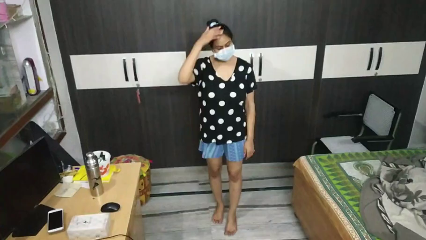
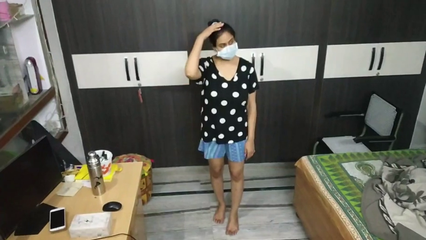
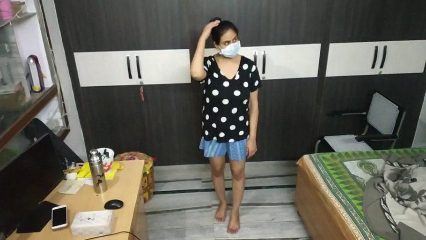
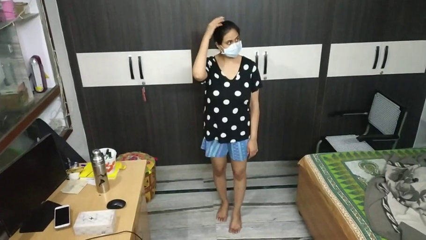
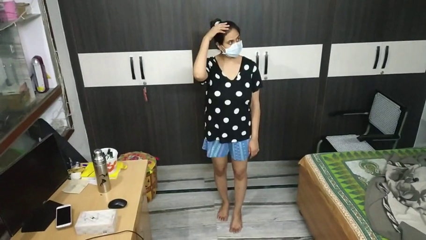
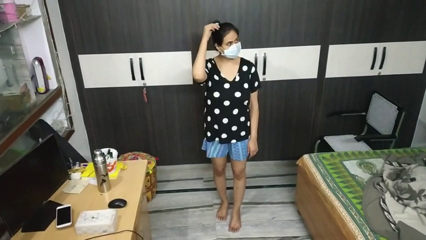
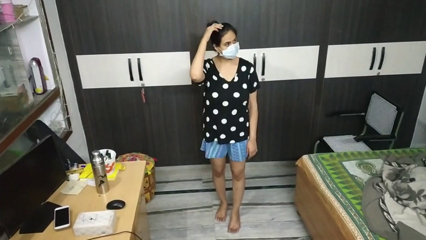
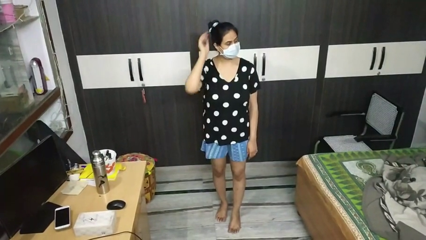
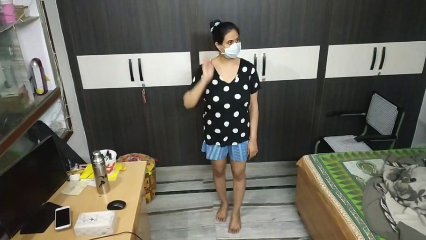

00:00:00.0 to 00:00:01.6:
person pats head

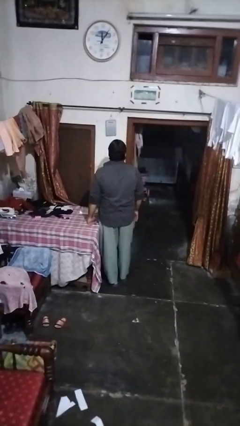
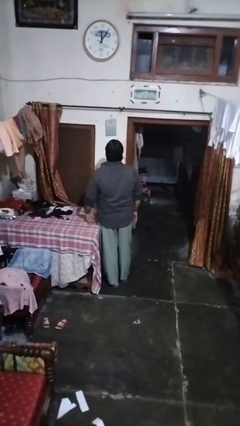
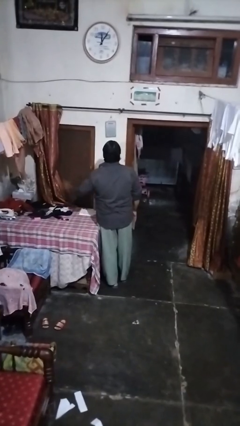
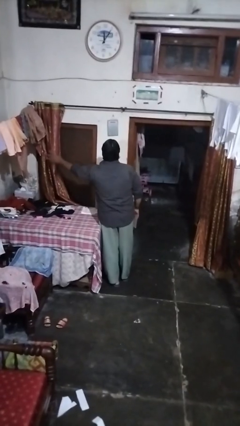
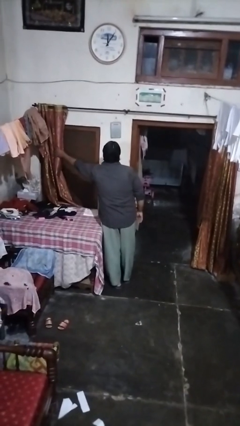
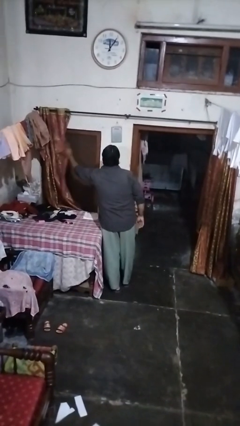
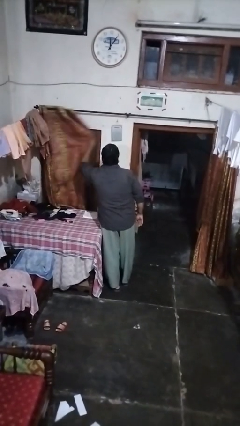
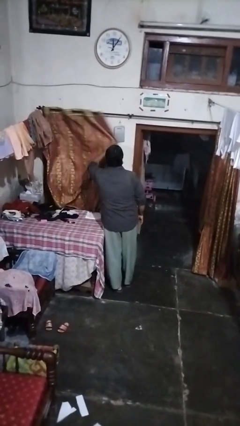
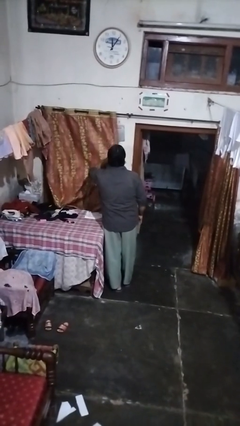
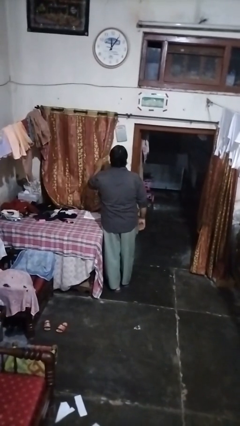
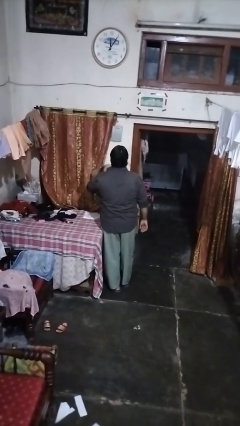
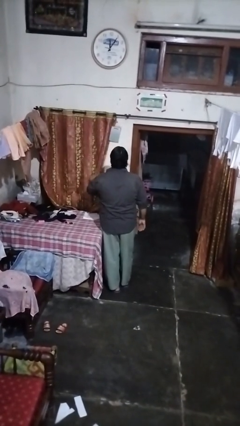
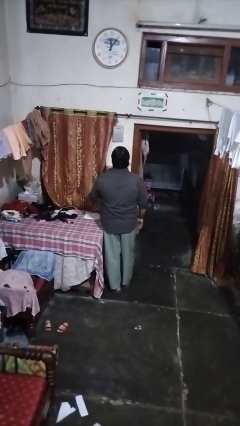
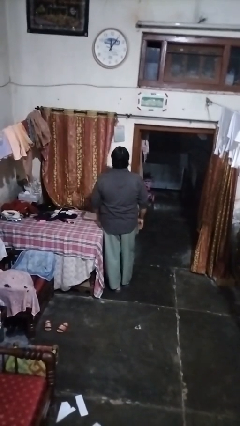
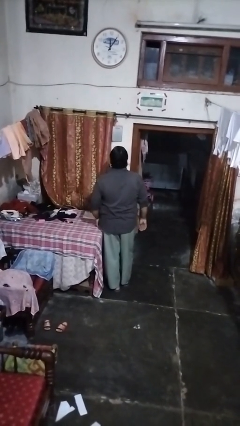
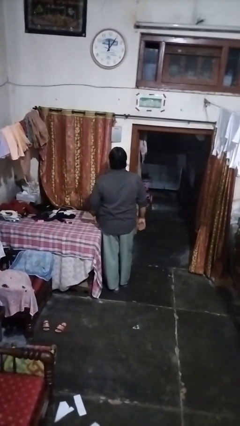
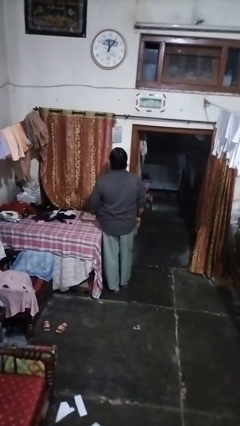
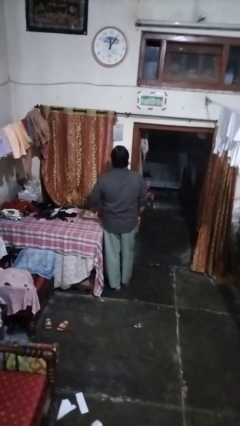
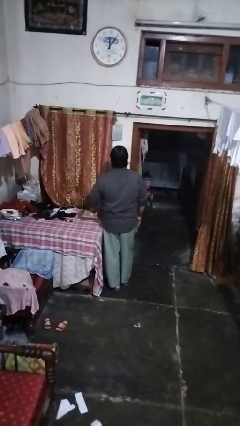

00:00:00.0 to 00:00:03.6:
person closes curtains

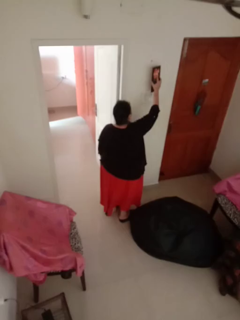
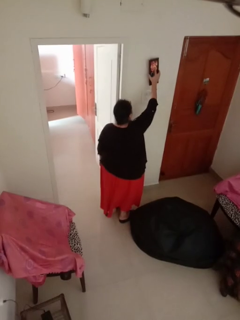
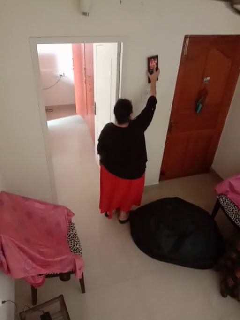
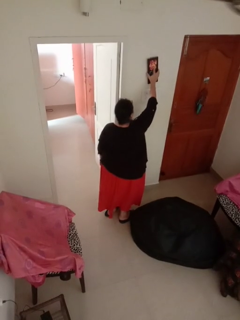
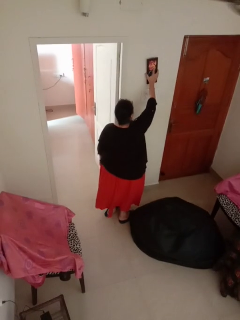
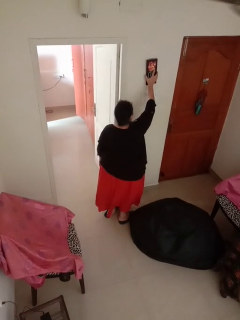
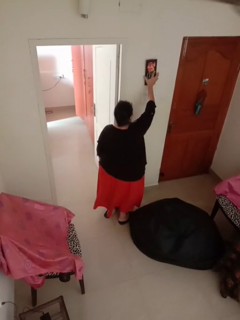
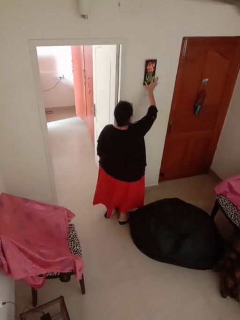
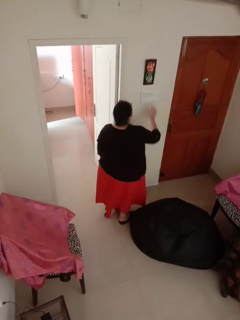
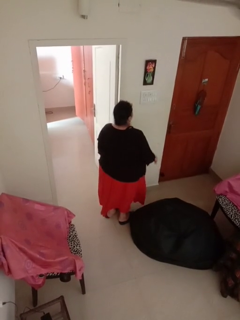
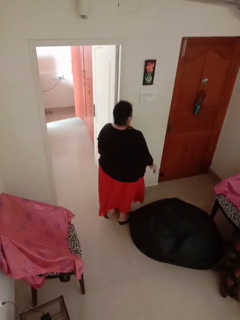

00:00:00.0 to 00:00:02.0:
person puts up picture frame

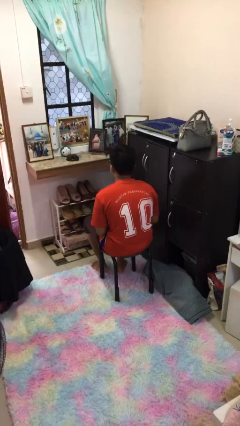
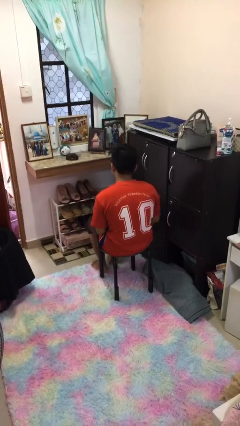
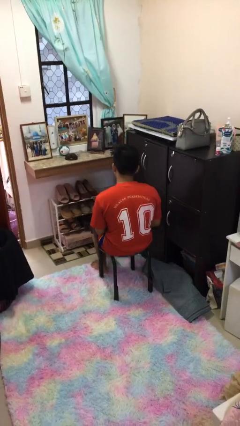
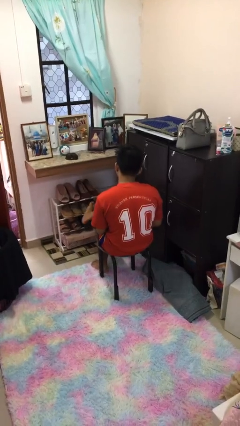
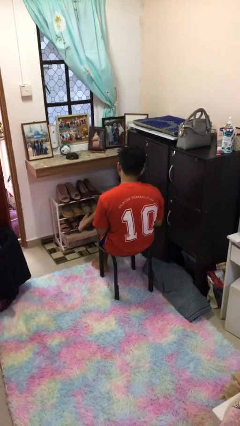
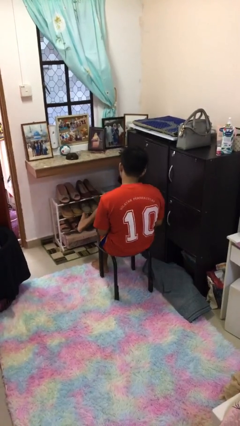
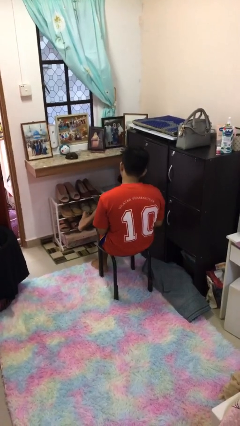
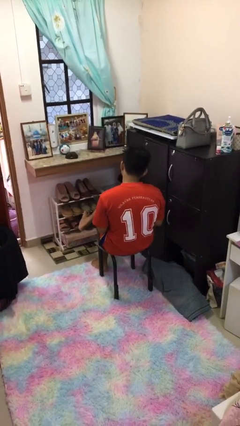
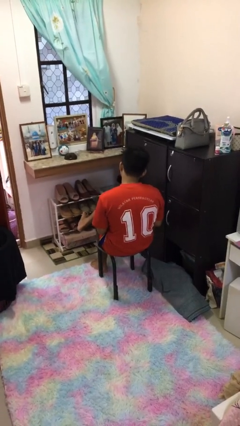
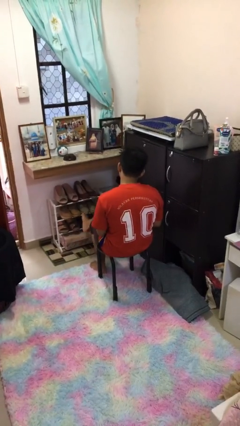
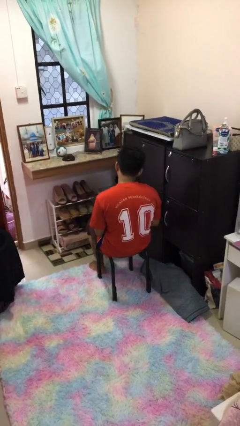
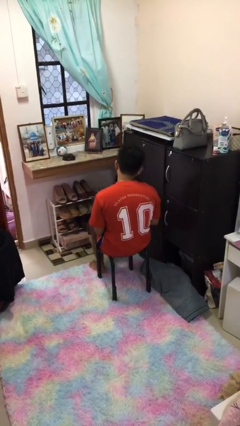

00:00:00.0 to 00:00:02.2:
person crosses legs

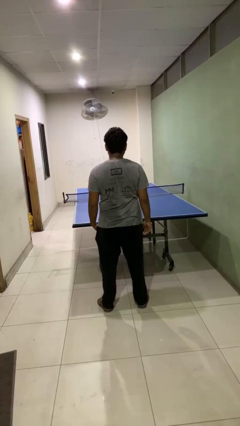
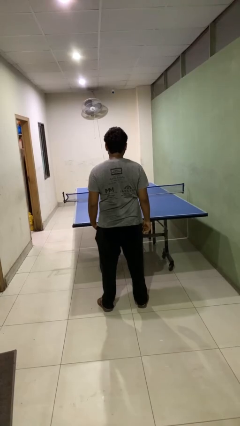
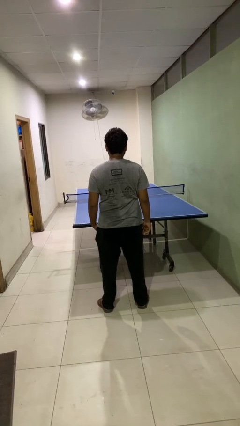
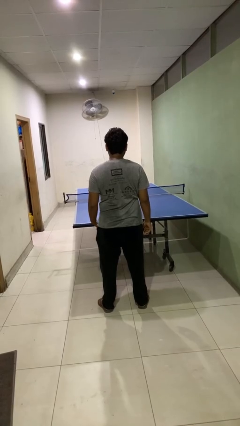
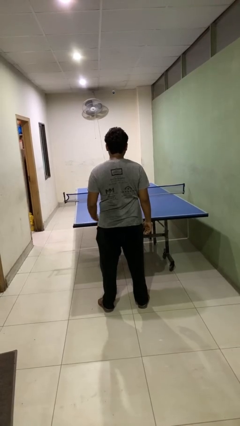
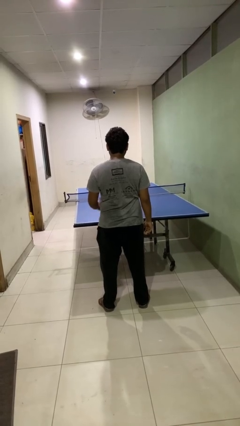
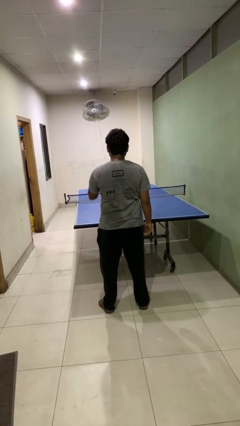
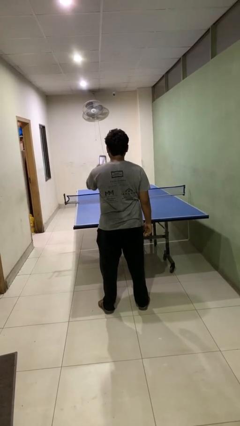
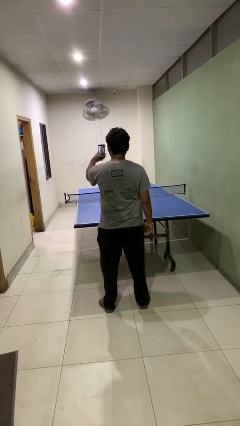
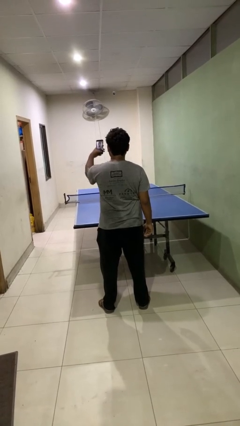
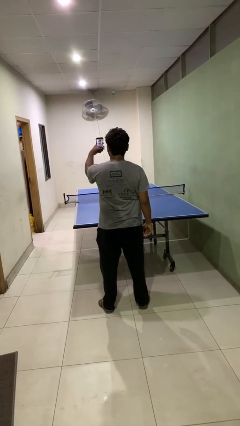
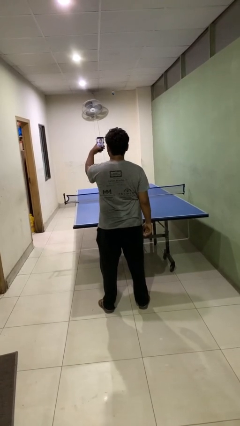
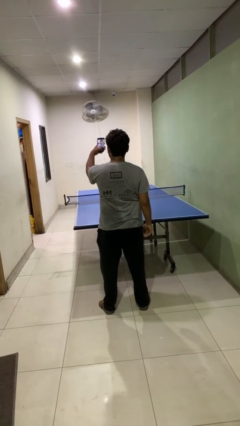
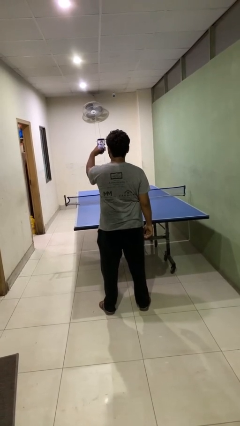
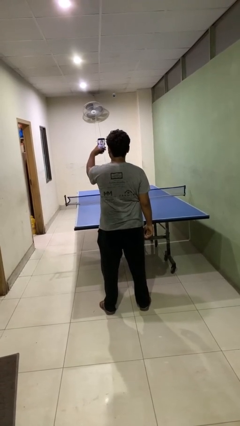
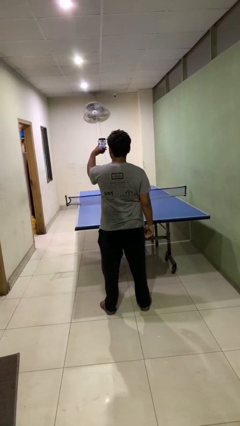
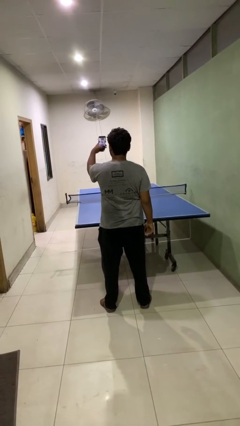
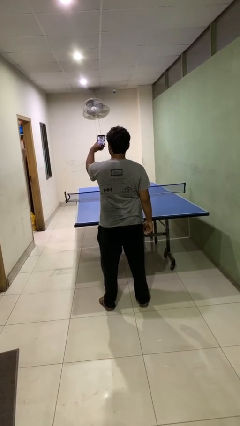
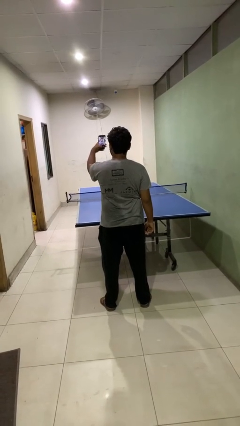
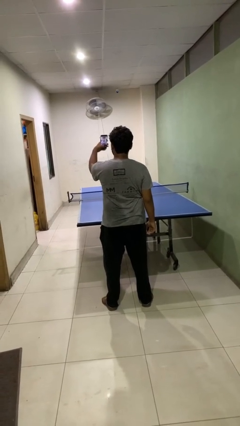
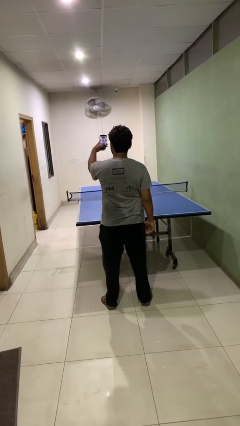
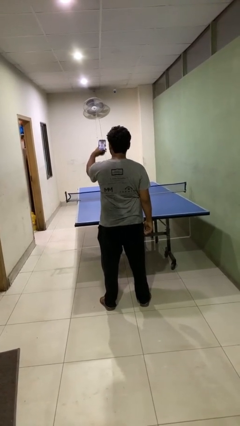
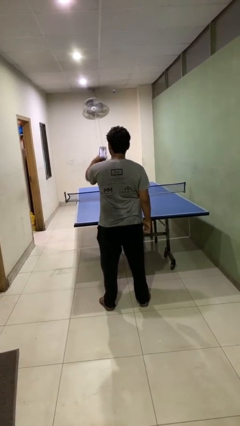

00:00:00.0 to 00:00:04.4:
person takes selfie

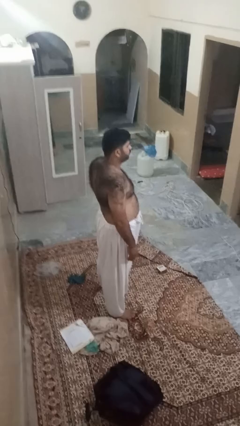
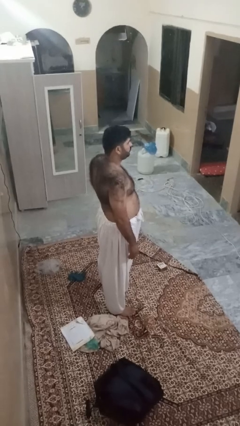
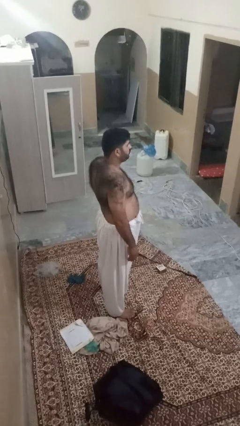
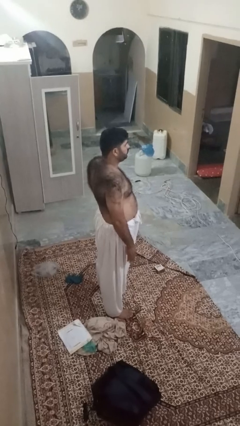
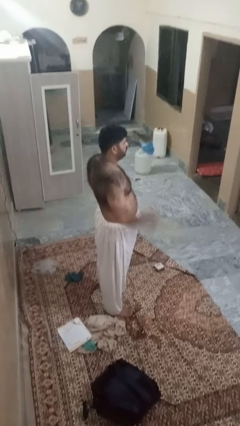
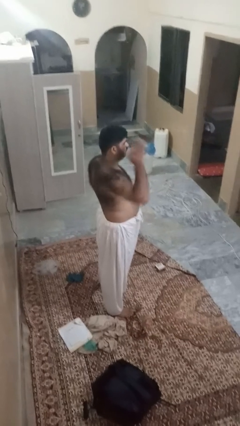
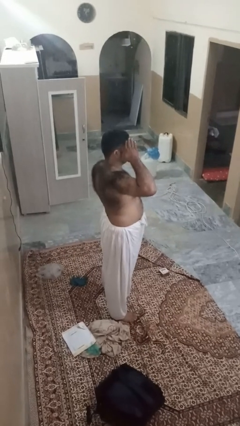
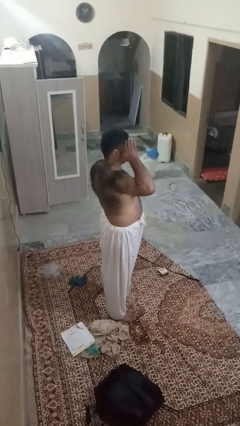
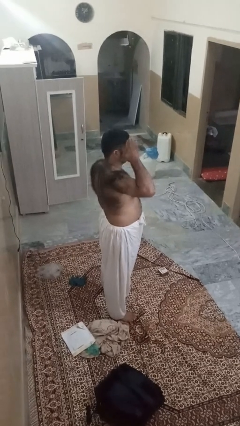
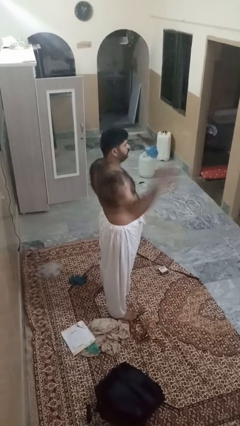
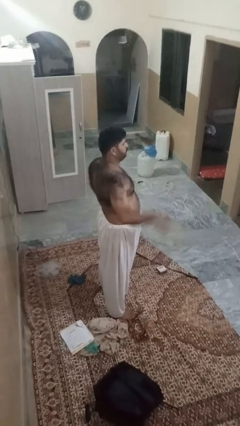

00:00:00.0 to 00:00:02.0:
person salutes

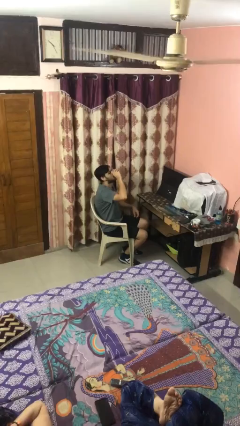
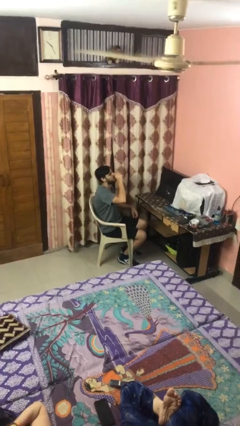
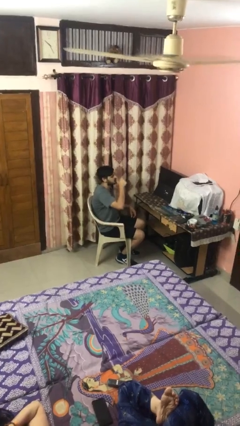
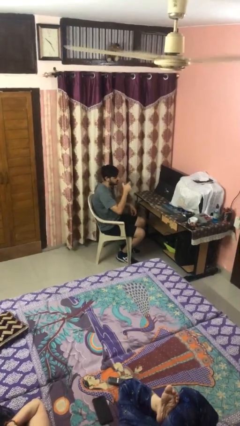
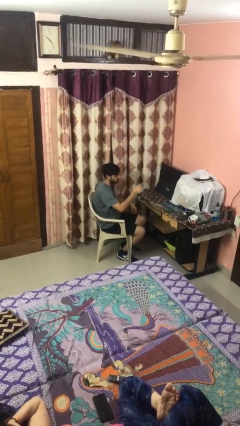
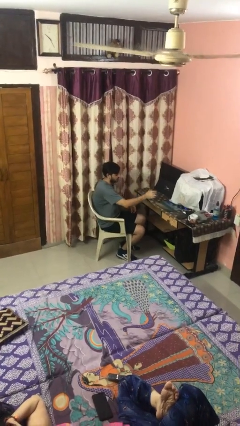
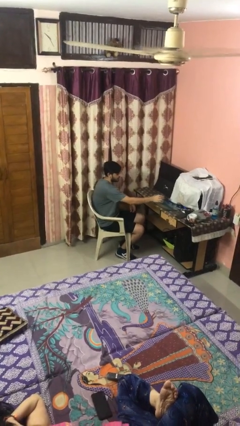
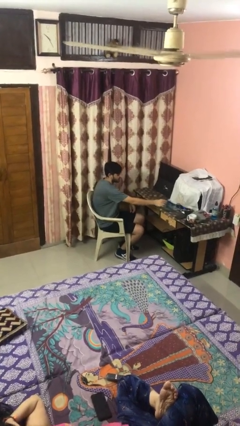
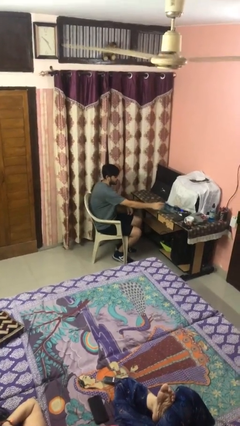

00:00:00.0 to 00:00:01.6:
person puts down object on table

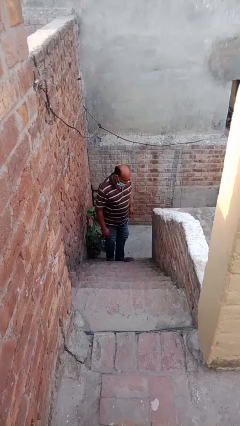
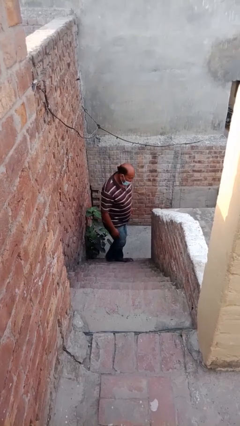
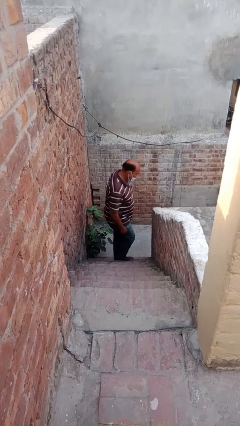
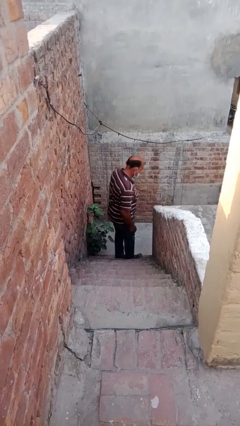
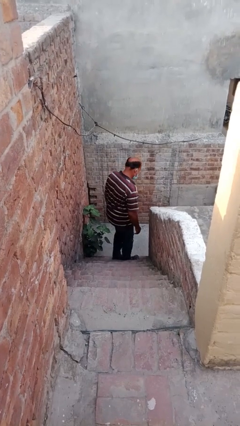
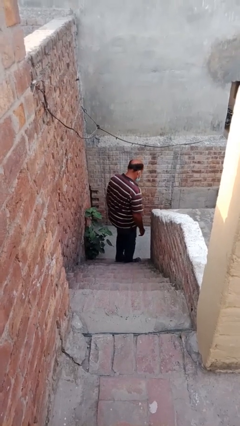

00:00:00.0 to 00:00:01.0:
person climbs up stairs
